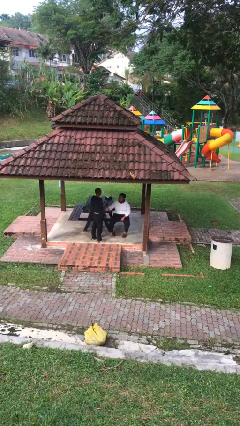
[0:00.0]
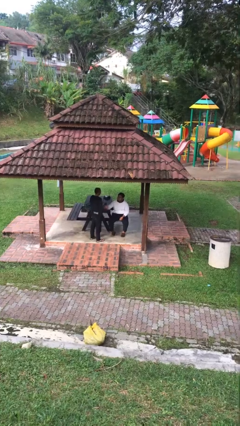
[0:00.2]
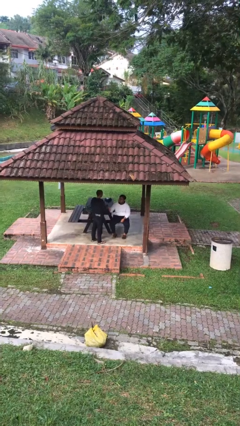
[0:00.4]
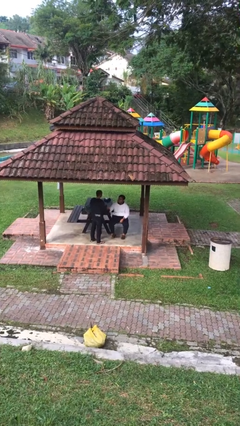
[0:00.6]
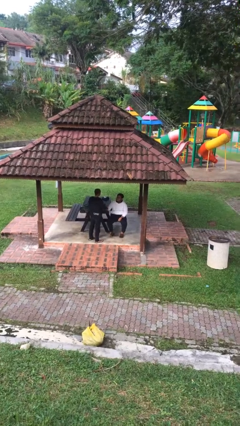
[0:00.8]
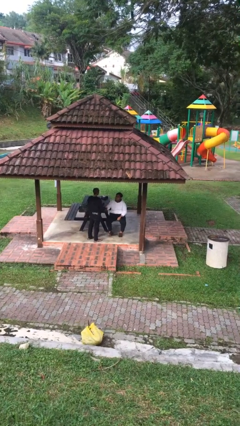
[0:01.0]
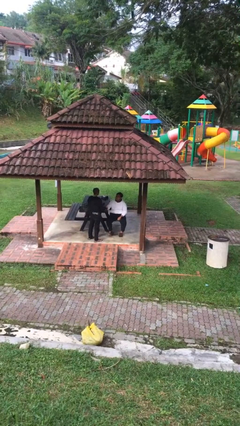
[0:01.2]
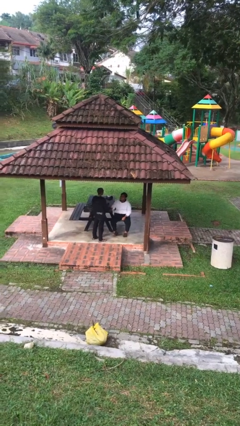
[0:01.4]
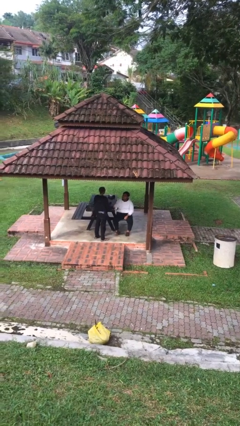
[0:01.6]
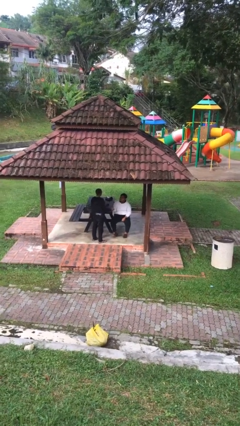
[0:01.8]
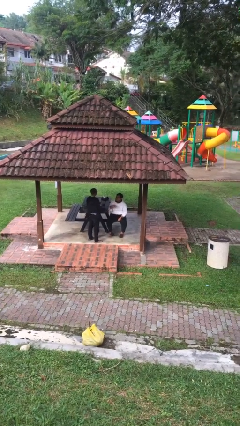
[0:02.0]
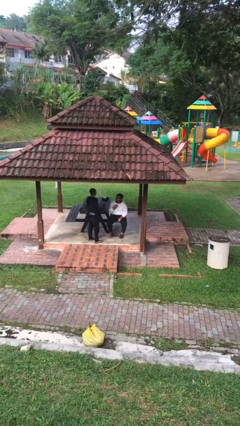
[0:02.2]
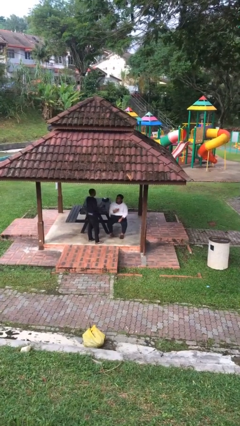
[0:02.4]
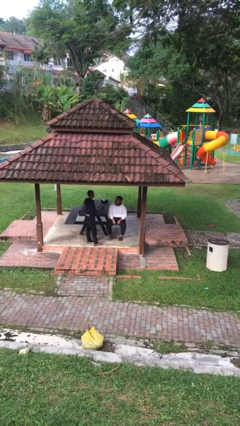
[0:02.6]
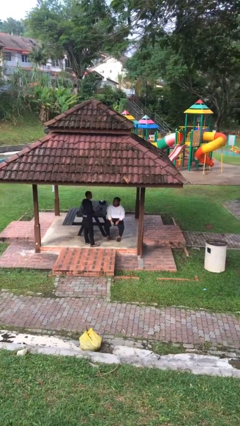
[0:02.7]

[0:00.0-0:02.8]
person shakes hand

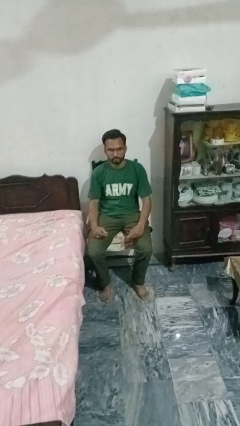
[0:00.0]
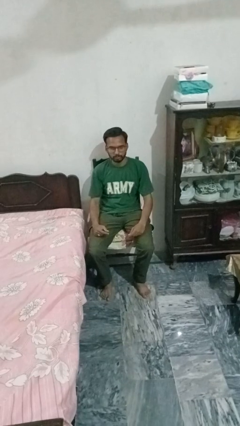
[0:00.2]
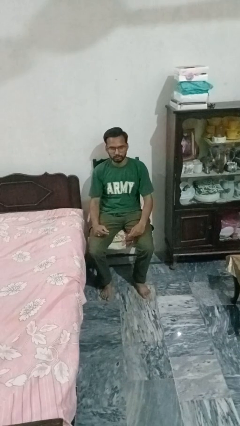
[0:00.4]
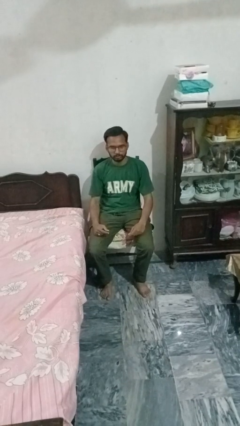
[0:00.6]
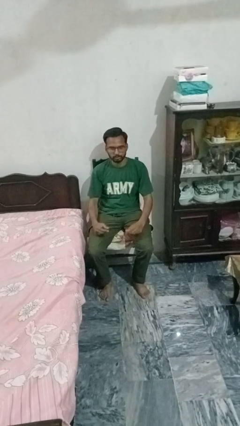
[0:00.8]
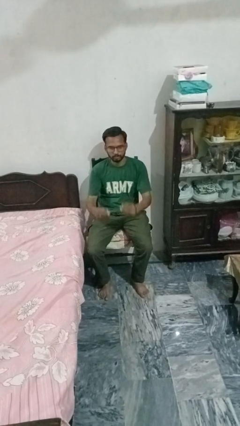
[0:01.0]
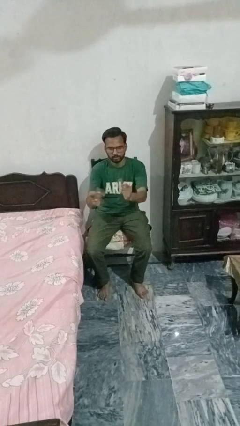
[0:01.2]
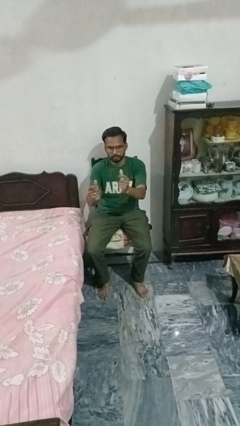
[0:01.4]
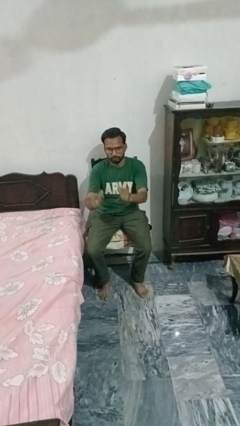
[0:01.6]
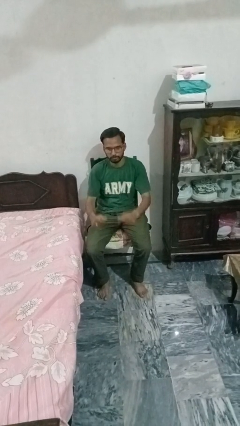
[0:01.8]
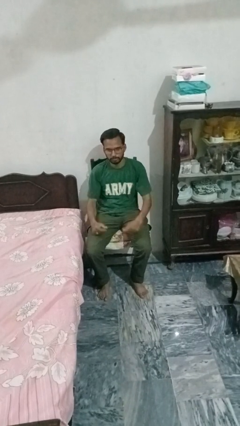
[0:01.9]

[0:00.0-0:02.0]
person snaps fingers

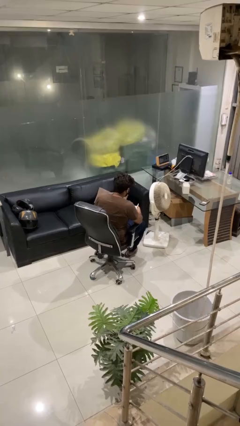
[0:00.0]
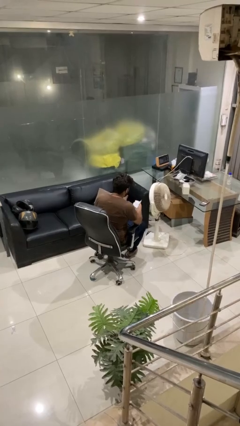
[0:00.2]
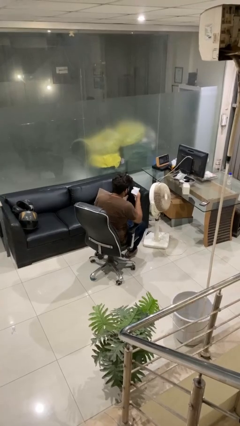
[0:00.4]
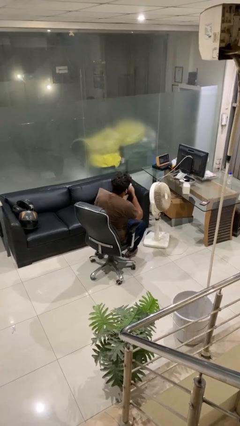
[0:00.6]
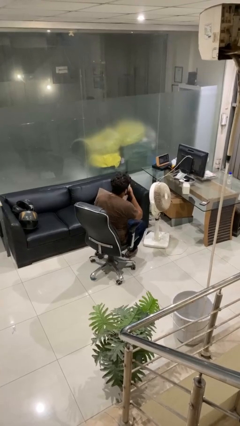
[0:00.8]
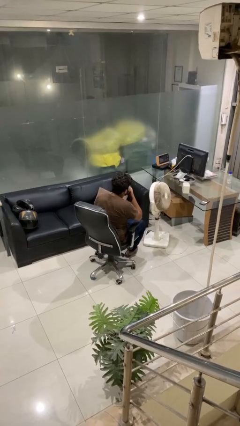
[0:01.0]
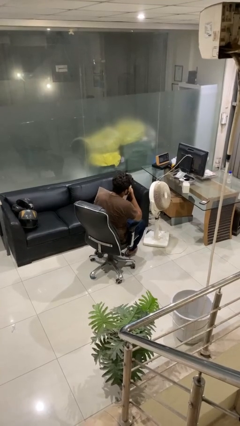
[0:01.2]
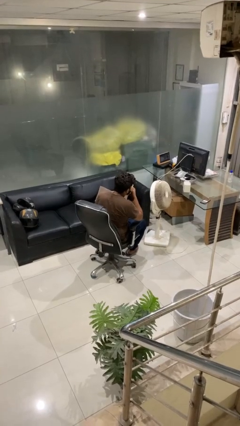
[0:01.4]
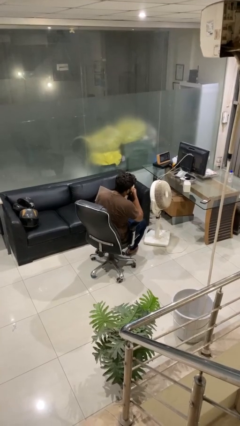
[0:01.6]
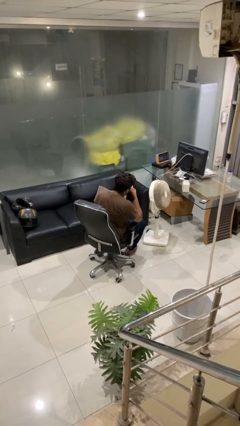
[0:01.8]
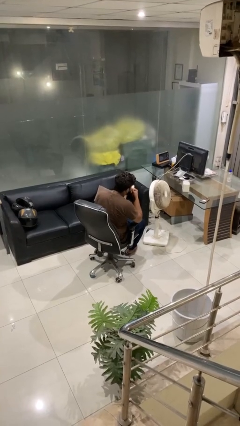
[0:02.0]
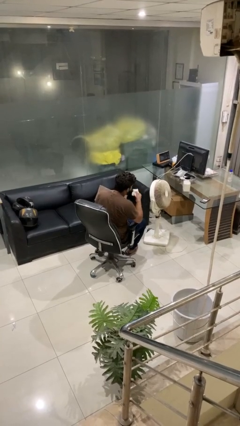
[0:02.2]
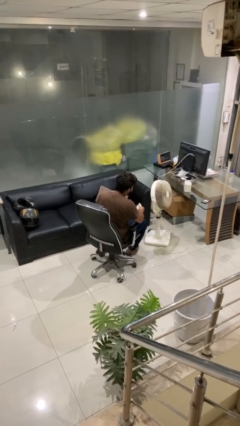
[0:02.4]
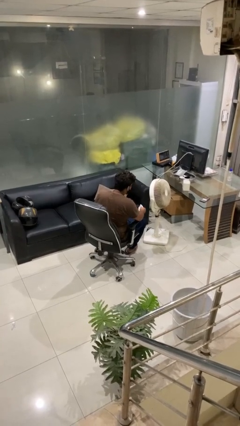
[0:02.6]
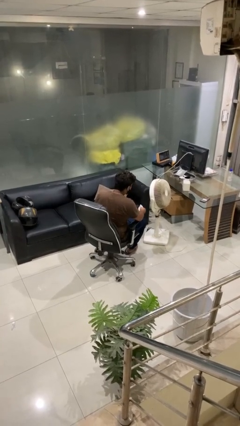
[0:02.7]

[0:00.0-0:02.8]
person blows nose

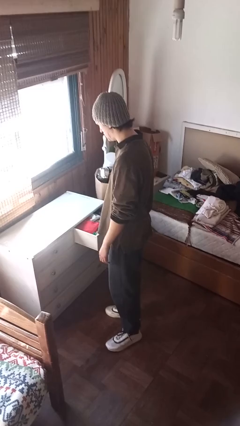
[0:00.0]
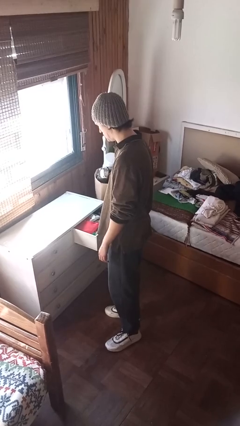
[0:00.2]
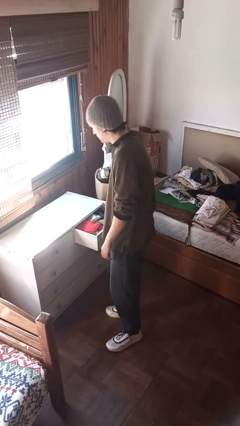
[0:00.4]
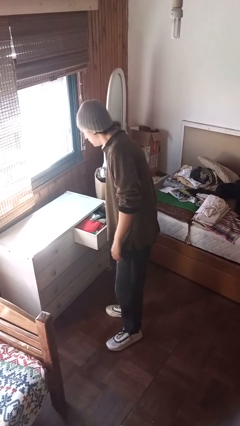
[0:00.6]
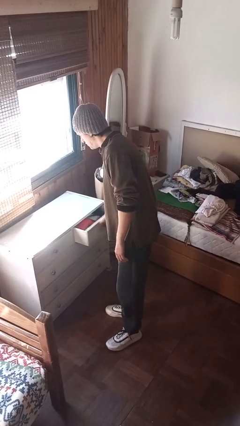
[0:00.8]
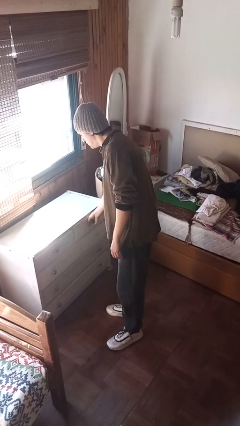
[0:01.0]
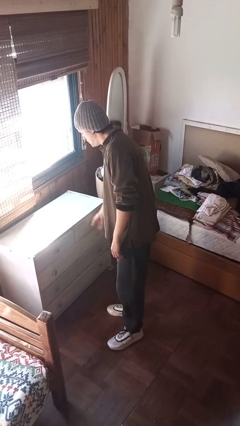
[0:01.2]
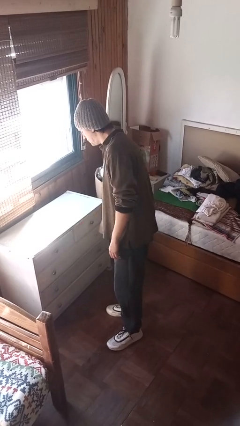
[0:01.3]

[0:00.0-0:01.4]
person closes dresser drawer

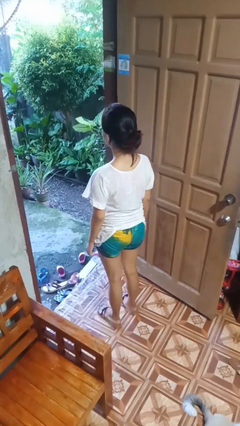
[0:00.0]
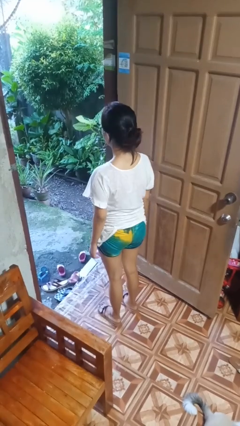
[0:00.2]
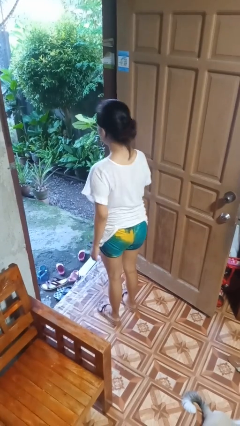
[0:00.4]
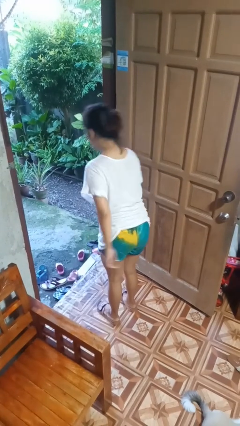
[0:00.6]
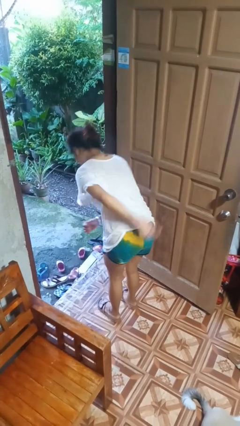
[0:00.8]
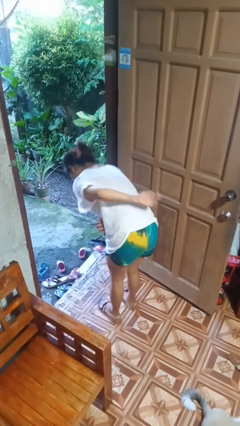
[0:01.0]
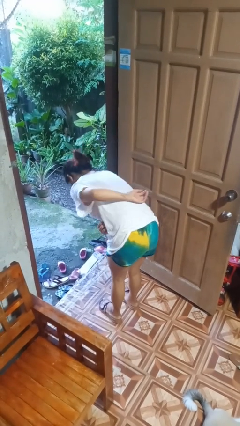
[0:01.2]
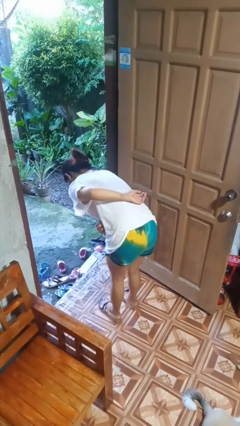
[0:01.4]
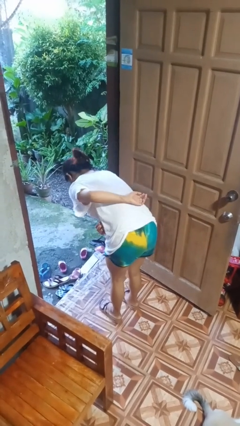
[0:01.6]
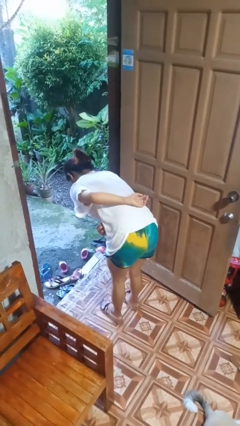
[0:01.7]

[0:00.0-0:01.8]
person bows

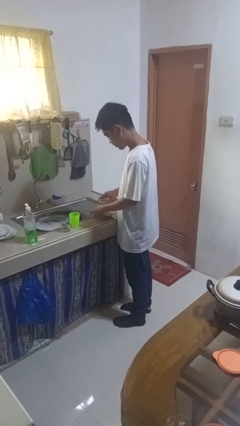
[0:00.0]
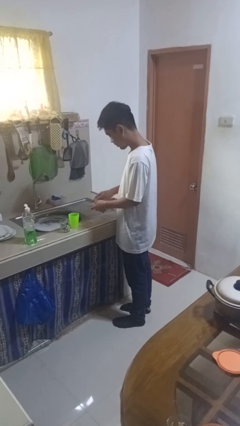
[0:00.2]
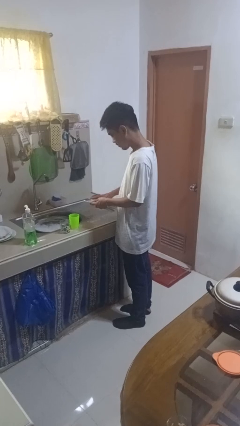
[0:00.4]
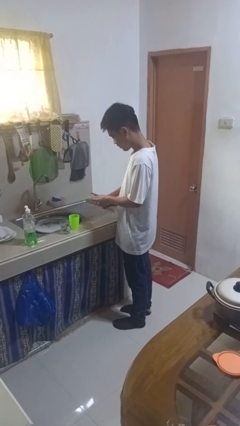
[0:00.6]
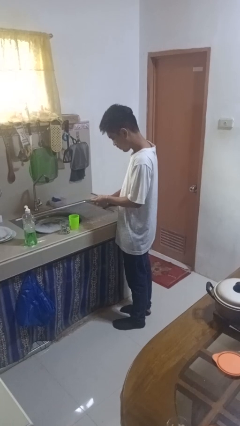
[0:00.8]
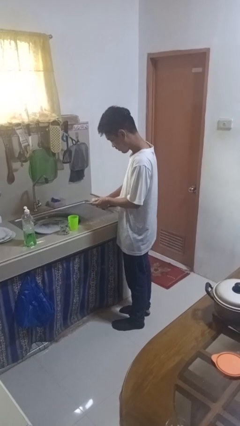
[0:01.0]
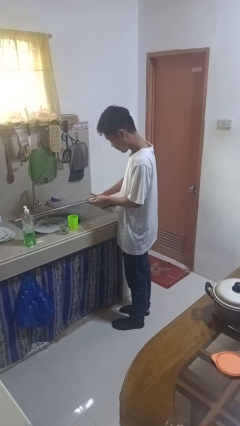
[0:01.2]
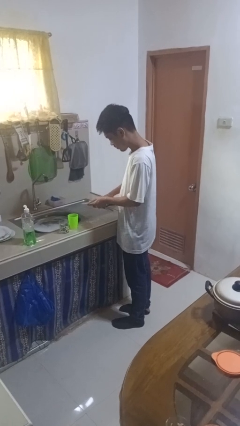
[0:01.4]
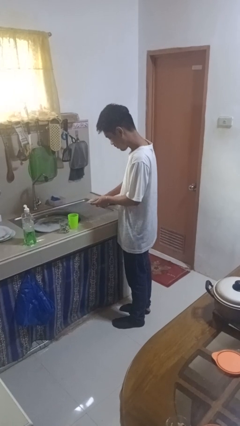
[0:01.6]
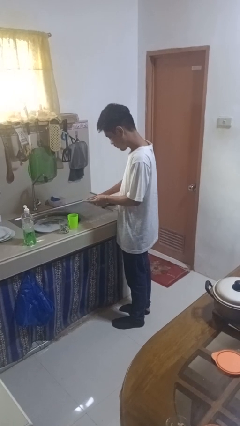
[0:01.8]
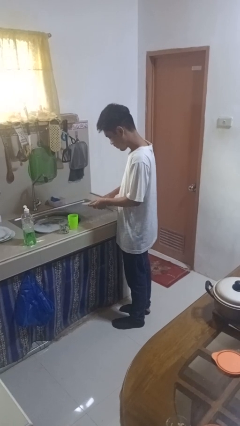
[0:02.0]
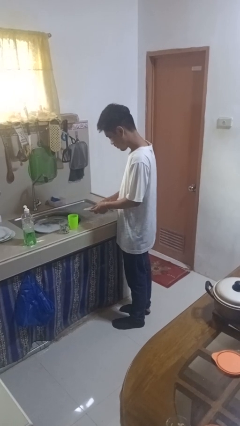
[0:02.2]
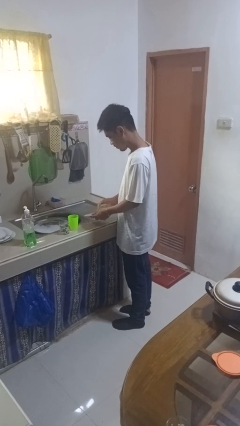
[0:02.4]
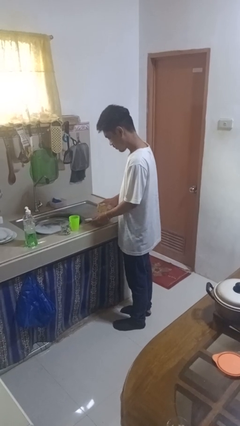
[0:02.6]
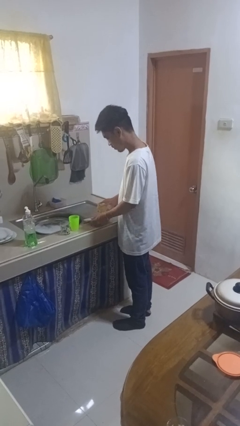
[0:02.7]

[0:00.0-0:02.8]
person washes dish

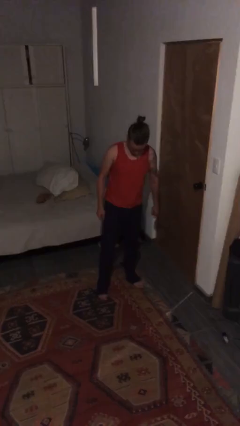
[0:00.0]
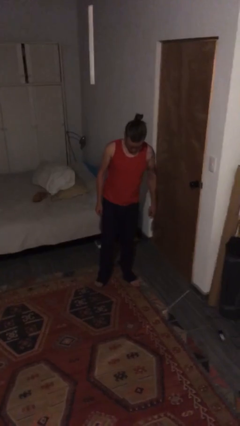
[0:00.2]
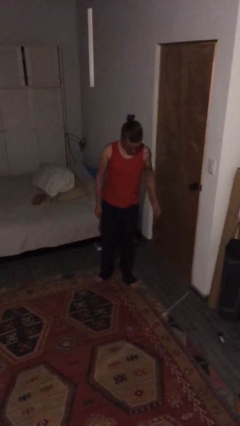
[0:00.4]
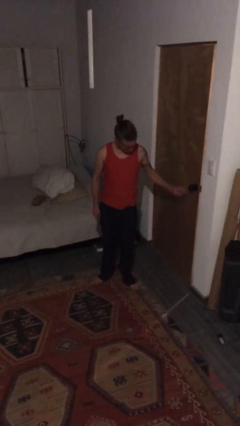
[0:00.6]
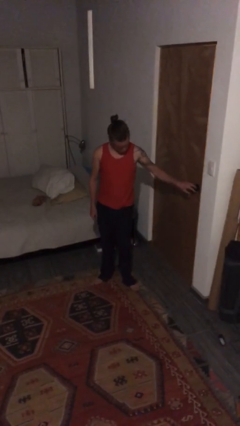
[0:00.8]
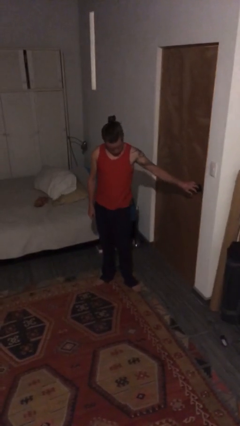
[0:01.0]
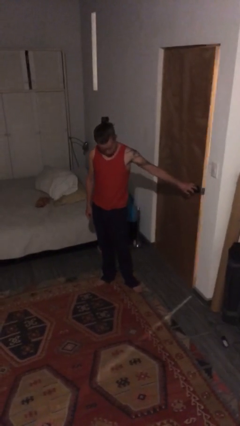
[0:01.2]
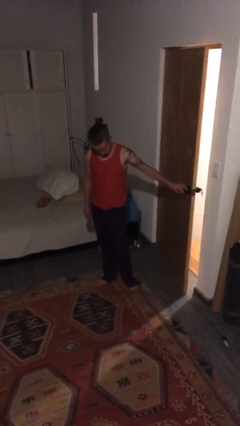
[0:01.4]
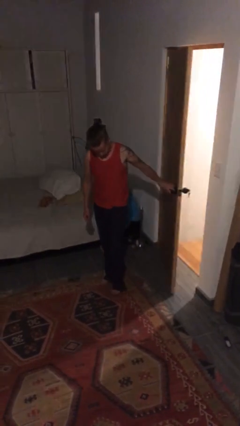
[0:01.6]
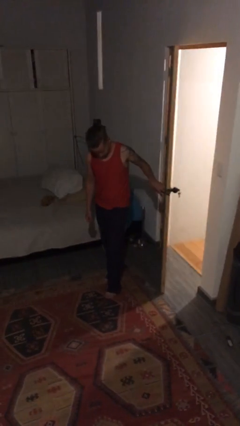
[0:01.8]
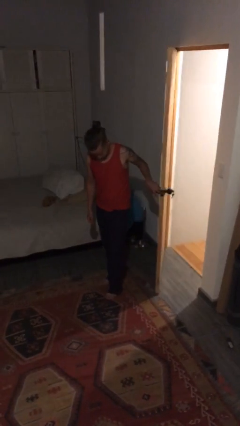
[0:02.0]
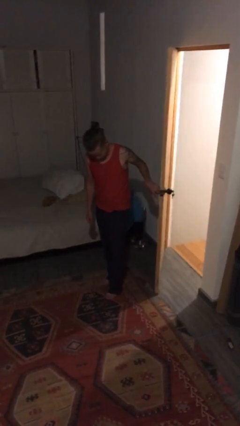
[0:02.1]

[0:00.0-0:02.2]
person opens facility door

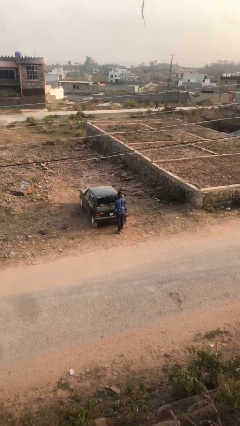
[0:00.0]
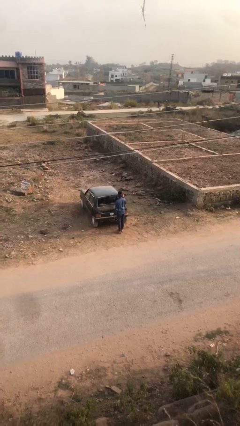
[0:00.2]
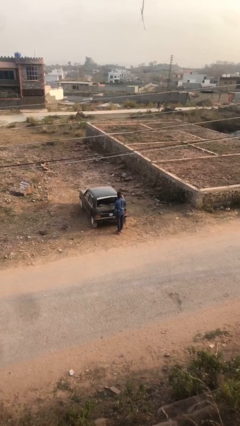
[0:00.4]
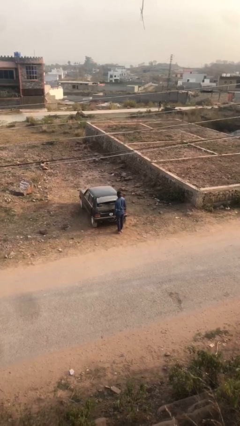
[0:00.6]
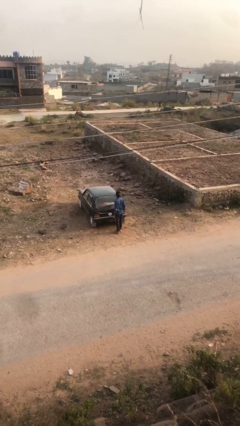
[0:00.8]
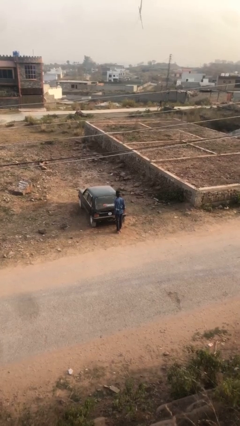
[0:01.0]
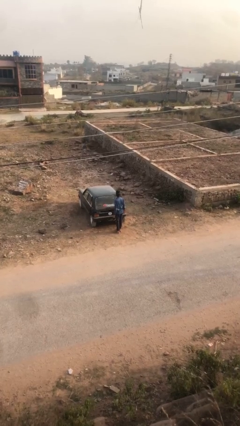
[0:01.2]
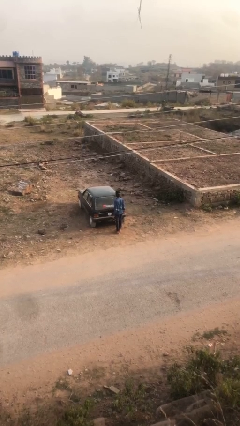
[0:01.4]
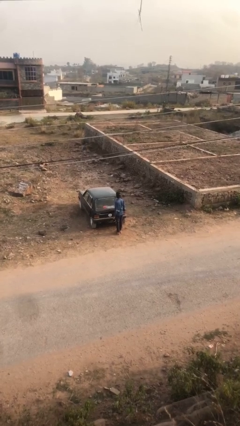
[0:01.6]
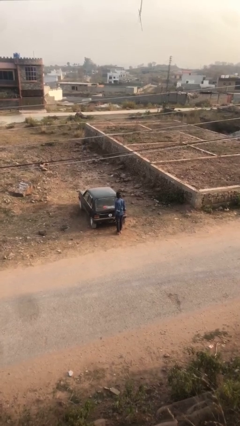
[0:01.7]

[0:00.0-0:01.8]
person closes car trunk
